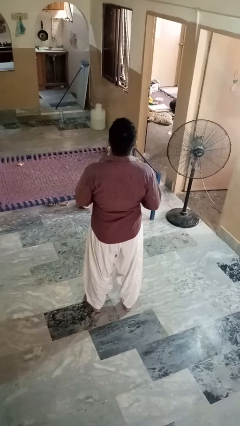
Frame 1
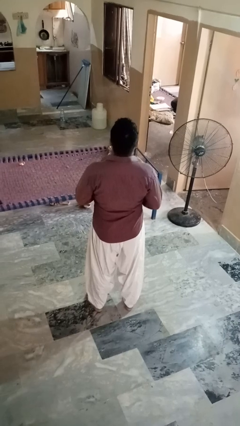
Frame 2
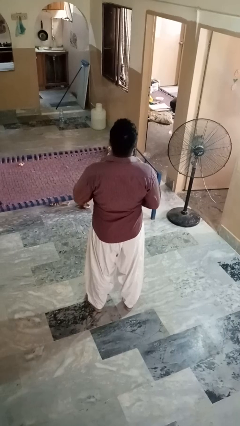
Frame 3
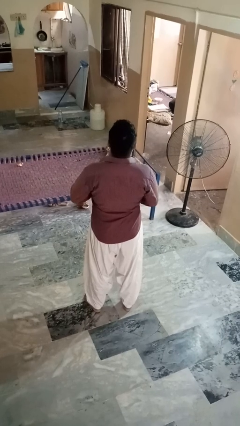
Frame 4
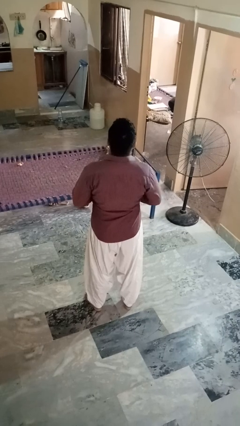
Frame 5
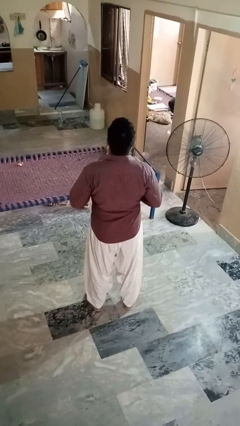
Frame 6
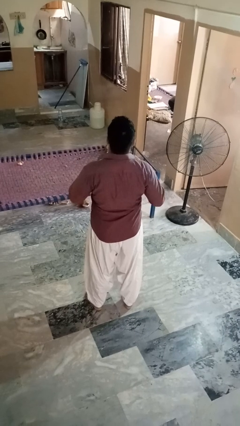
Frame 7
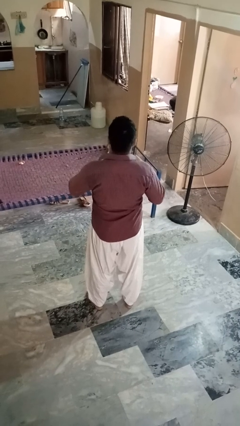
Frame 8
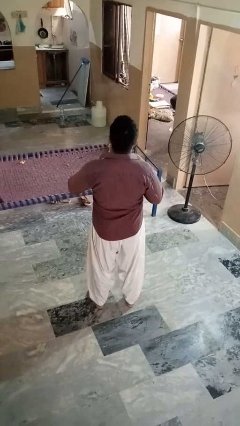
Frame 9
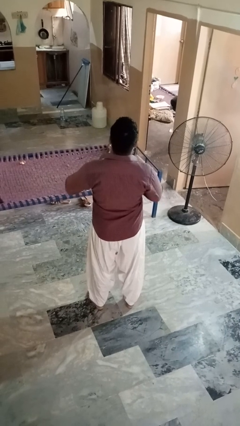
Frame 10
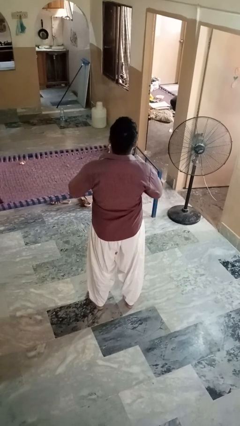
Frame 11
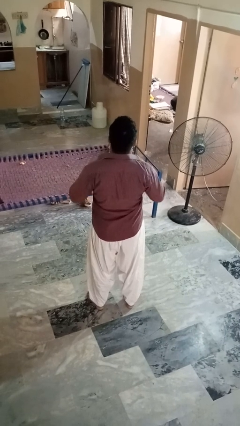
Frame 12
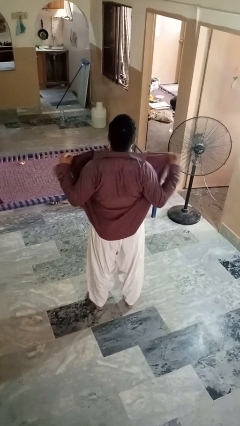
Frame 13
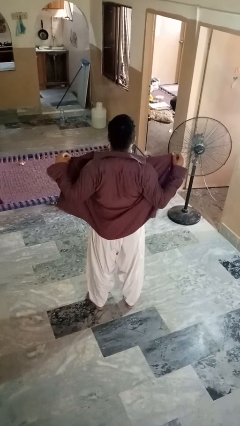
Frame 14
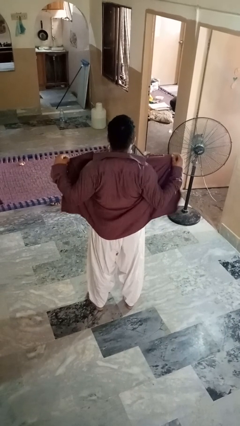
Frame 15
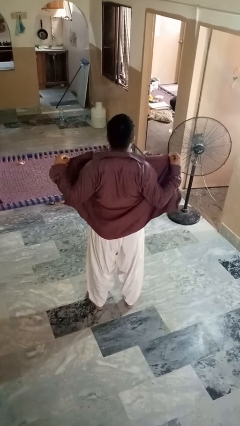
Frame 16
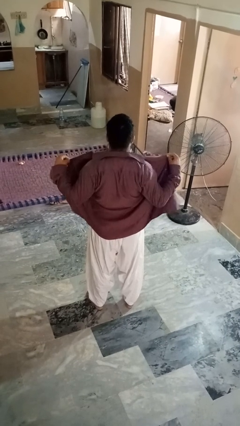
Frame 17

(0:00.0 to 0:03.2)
person unbuttons shirt

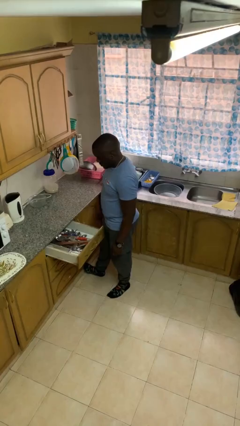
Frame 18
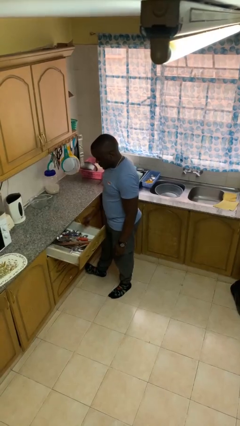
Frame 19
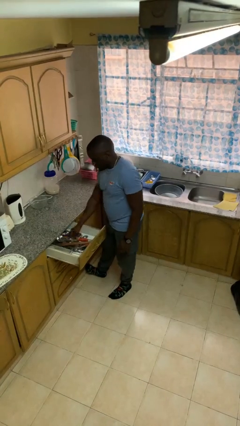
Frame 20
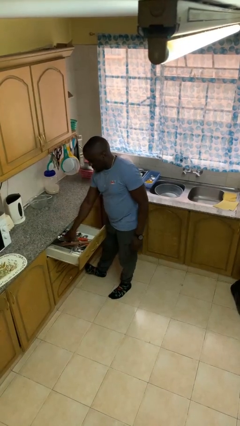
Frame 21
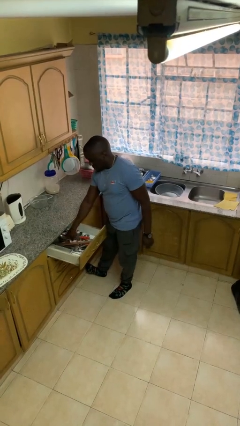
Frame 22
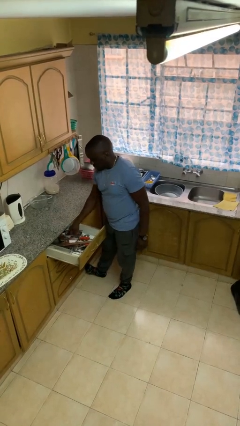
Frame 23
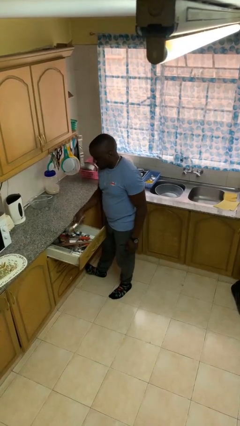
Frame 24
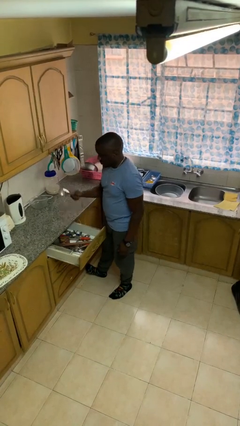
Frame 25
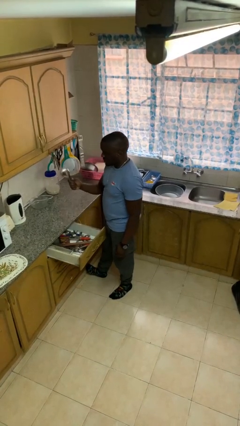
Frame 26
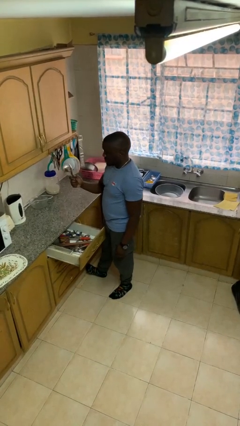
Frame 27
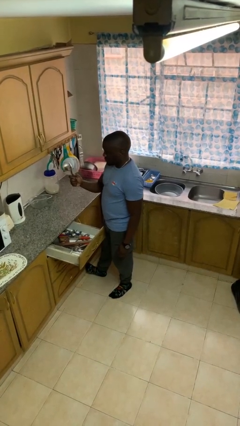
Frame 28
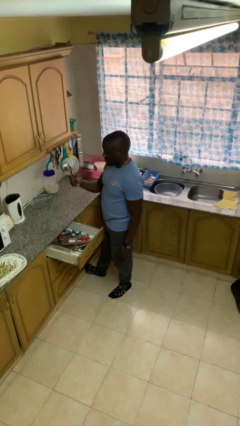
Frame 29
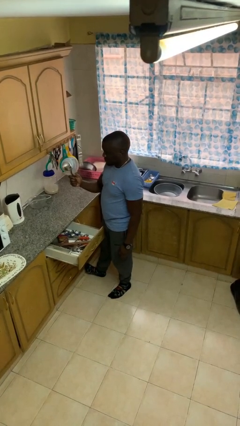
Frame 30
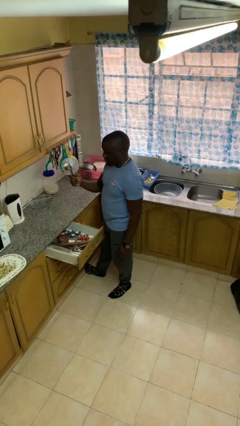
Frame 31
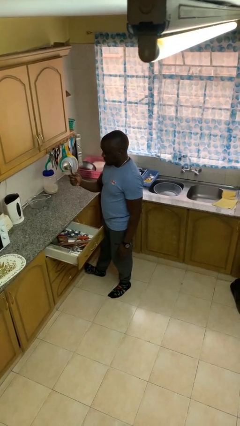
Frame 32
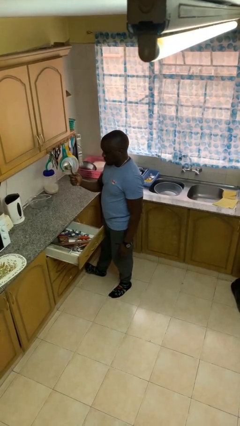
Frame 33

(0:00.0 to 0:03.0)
person takes object from kitchen drawer

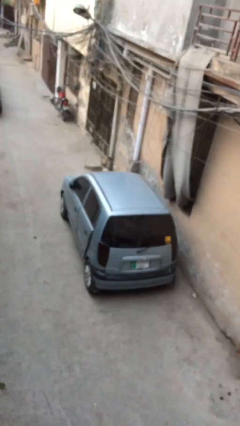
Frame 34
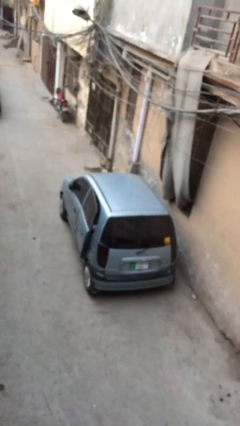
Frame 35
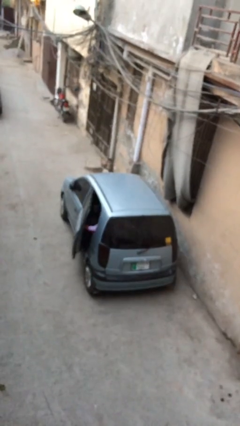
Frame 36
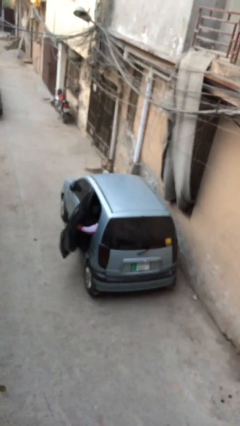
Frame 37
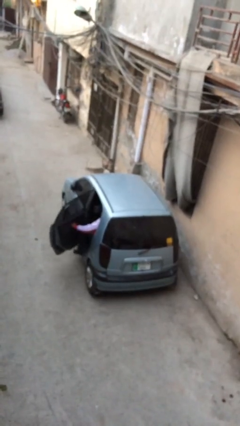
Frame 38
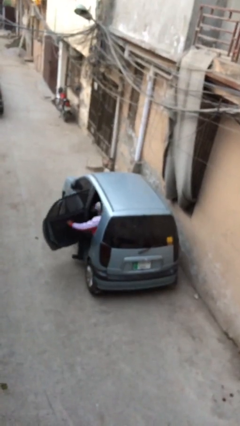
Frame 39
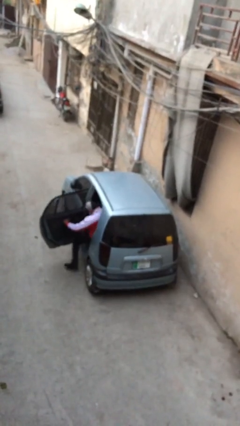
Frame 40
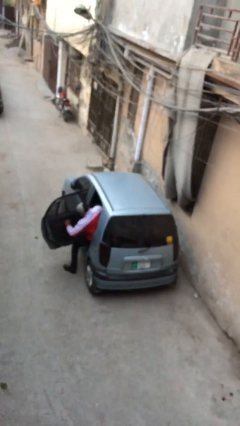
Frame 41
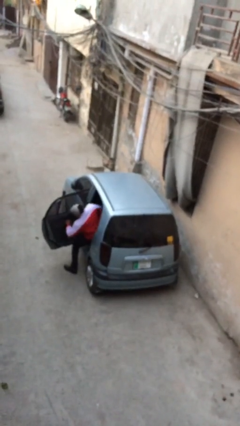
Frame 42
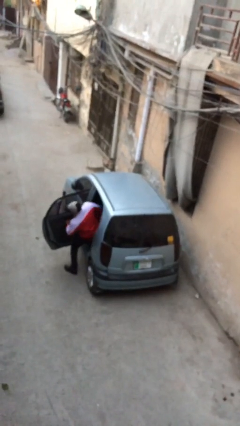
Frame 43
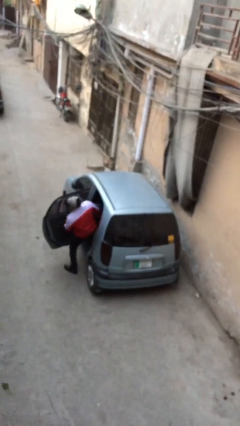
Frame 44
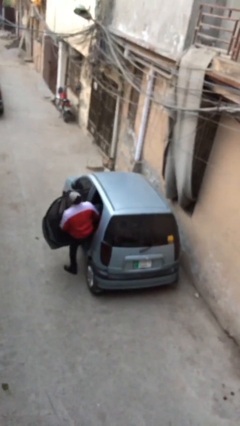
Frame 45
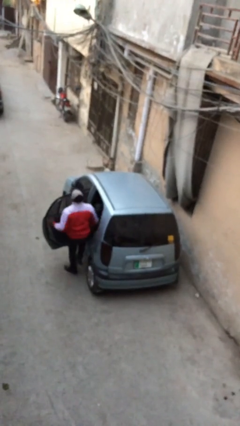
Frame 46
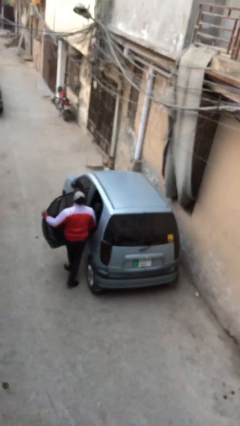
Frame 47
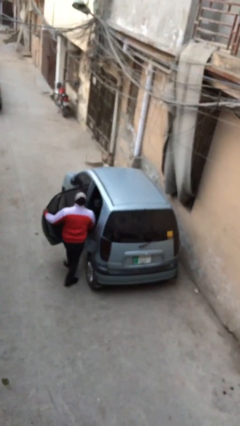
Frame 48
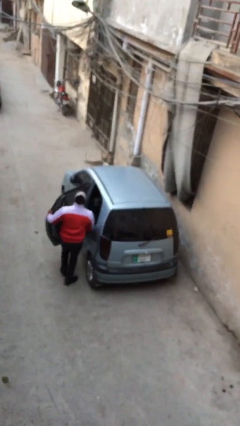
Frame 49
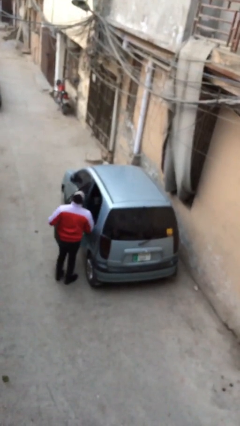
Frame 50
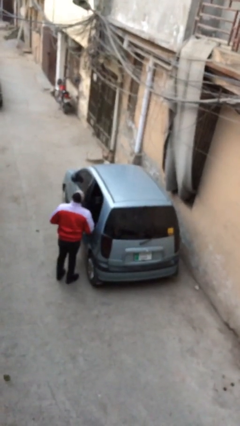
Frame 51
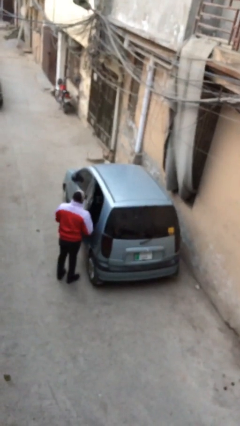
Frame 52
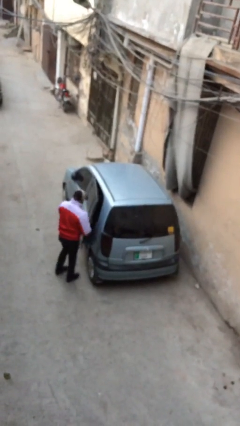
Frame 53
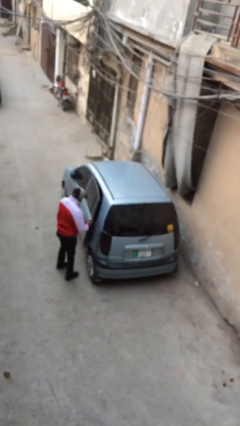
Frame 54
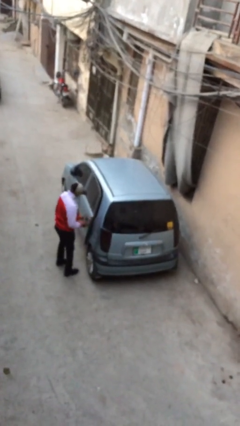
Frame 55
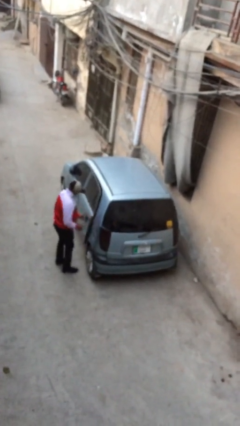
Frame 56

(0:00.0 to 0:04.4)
car drops off person

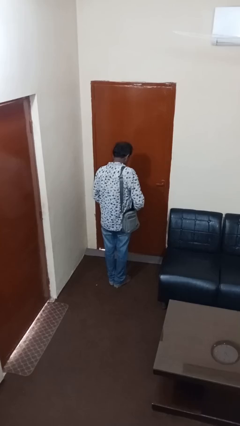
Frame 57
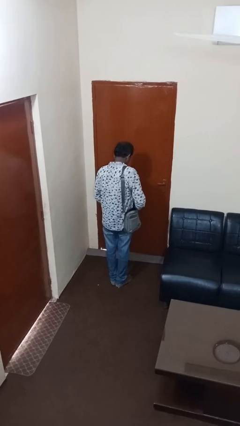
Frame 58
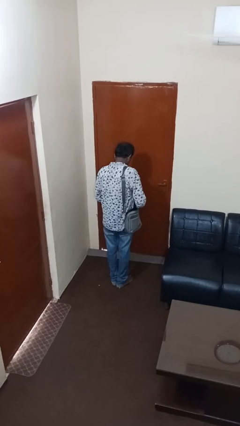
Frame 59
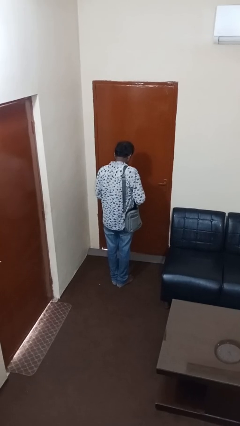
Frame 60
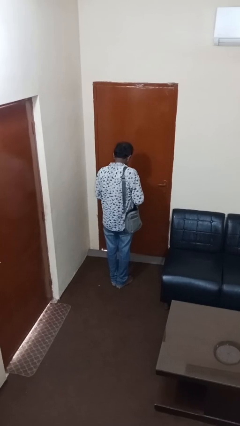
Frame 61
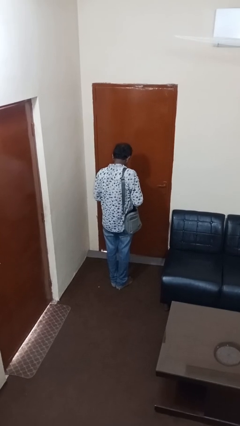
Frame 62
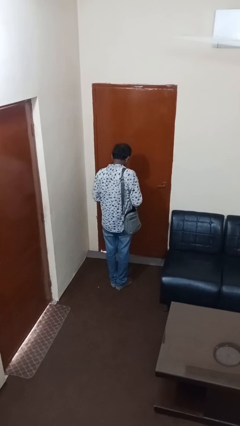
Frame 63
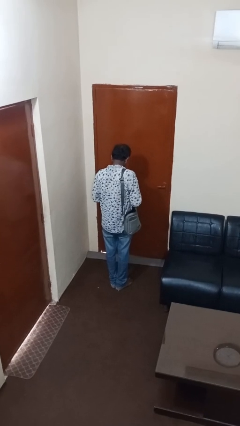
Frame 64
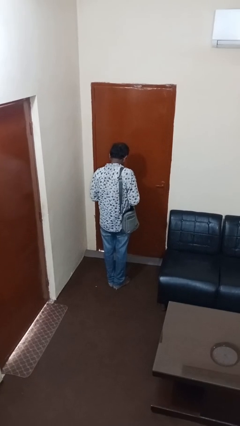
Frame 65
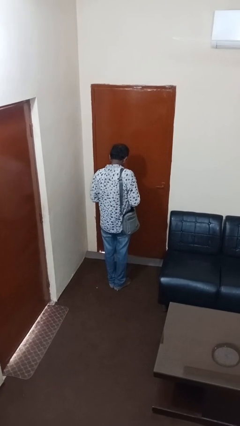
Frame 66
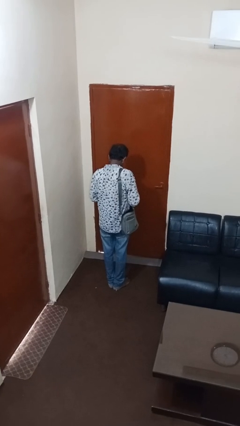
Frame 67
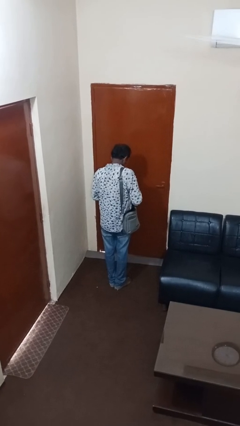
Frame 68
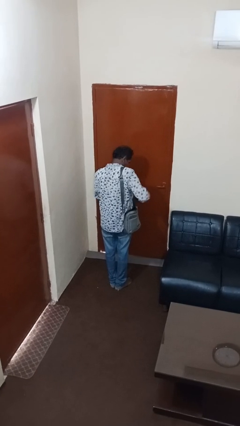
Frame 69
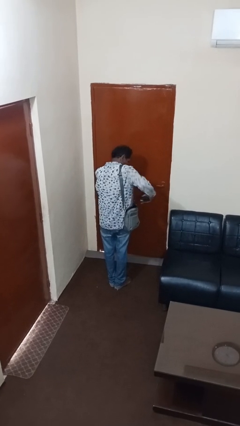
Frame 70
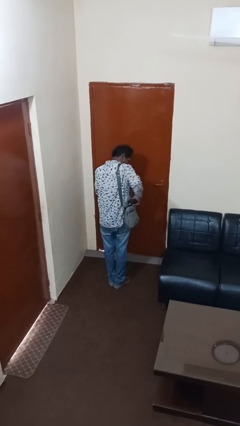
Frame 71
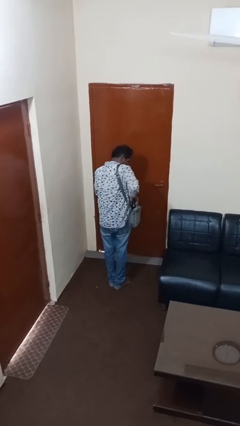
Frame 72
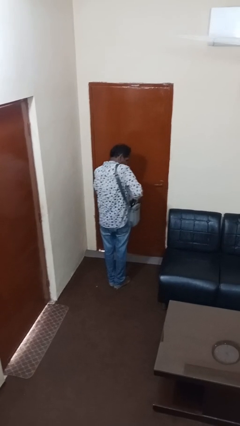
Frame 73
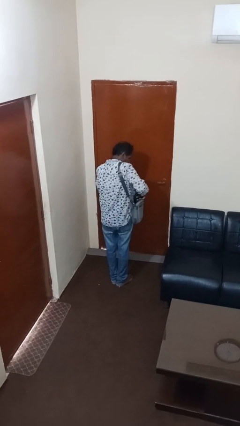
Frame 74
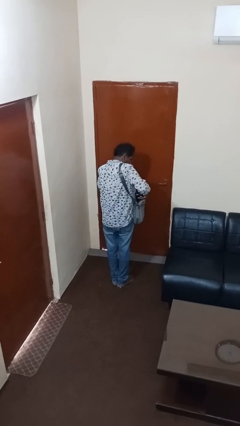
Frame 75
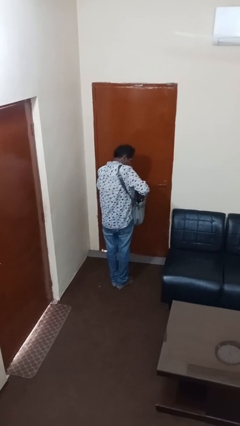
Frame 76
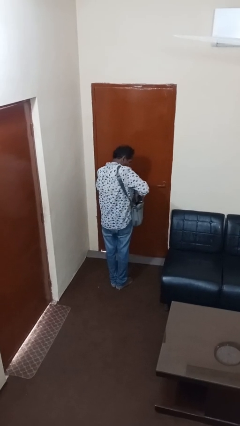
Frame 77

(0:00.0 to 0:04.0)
person puts object into purse

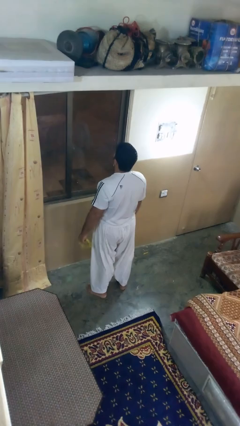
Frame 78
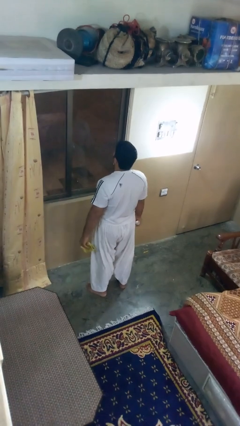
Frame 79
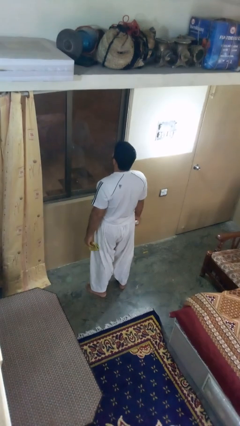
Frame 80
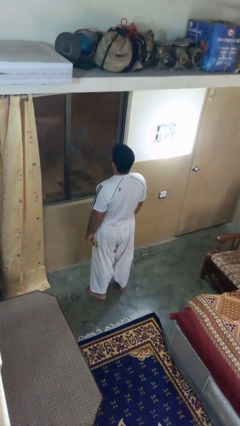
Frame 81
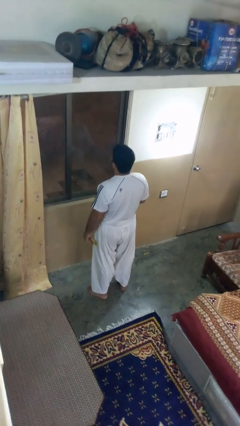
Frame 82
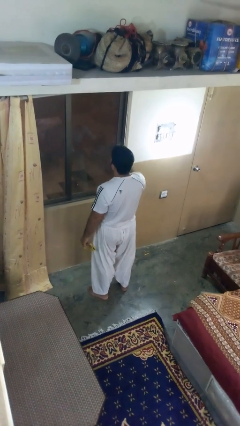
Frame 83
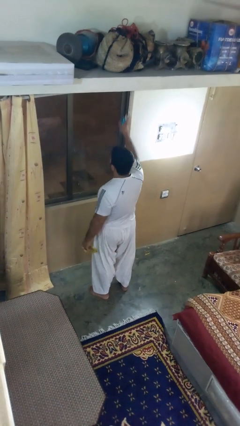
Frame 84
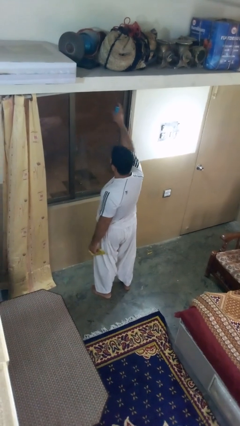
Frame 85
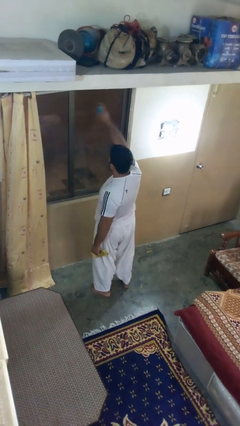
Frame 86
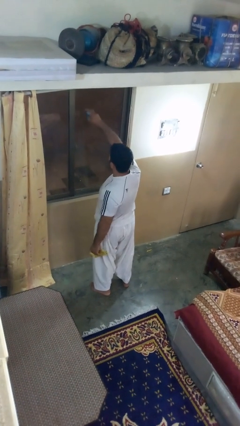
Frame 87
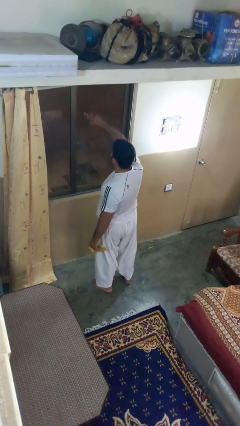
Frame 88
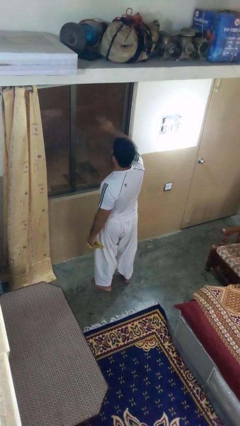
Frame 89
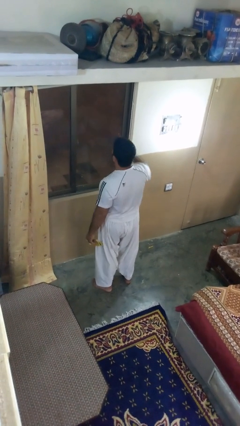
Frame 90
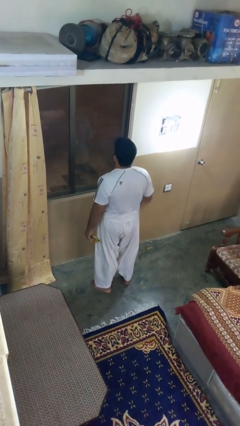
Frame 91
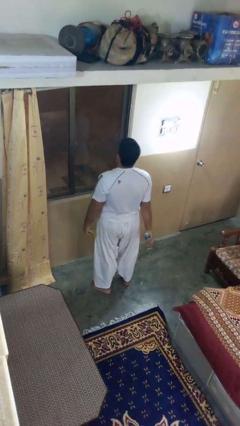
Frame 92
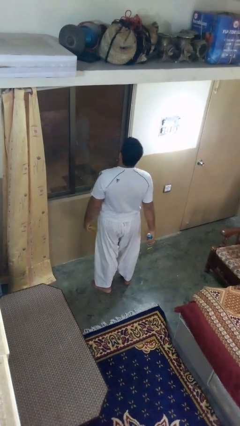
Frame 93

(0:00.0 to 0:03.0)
person sprays from bottle

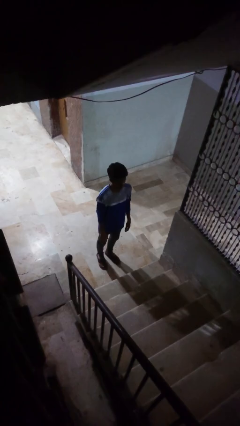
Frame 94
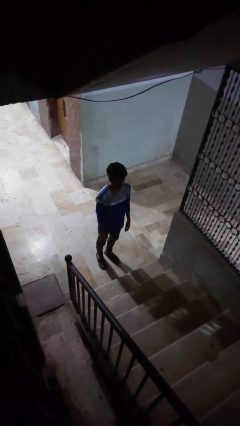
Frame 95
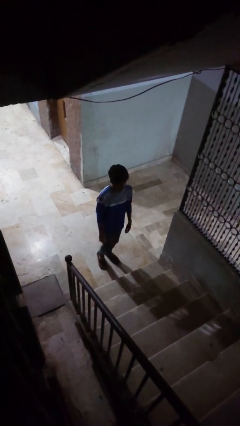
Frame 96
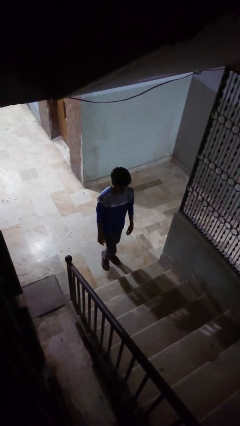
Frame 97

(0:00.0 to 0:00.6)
person climbs up stairs
